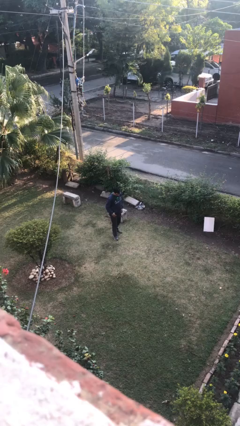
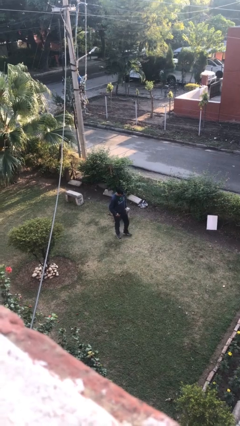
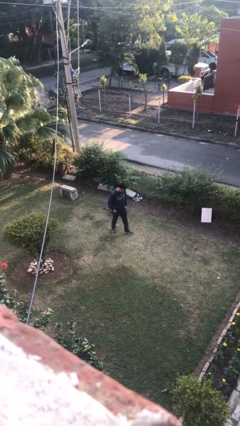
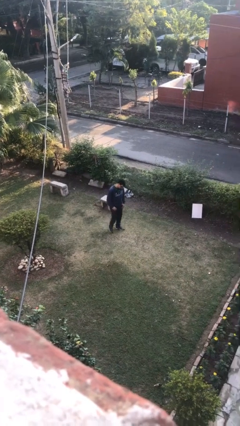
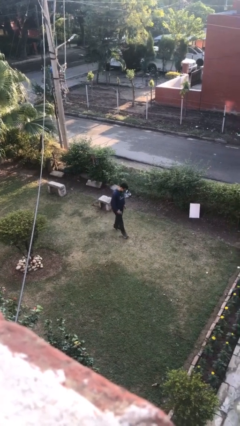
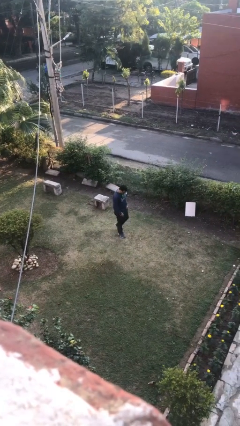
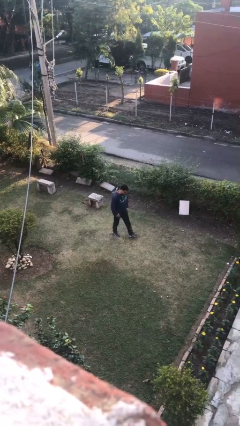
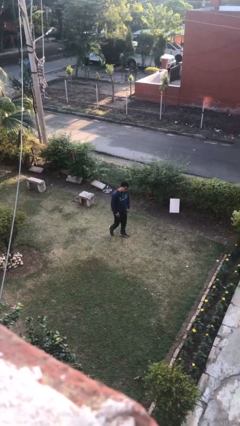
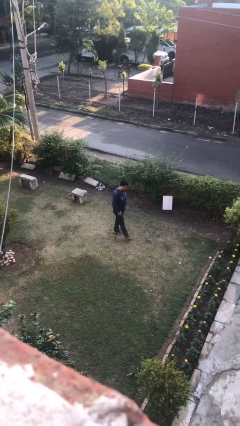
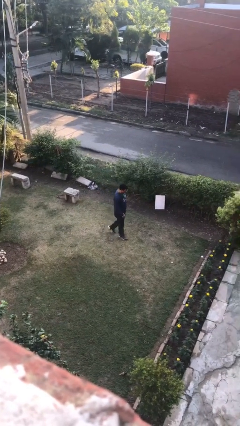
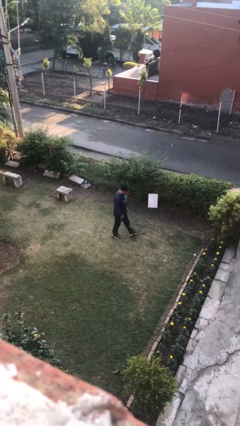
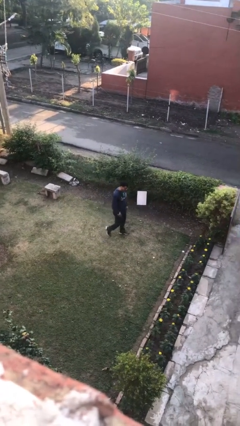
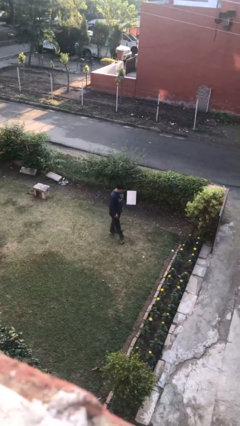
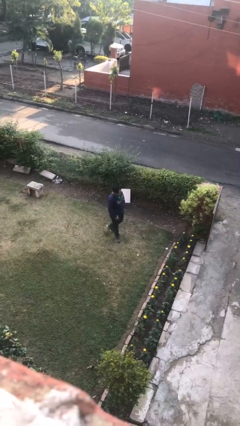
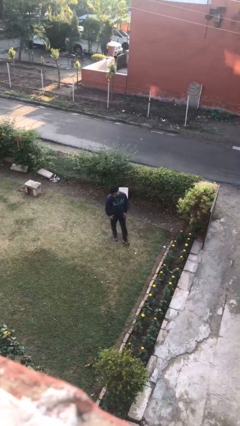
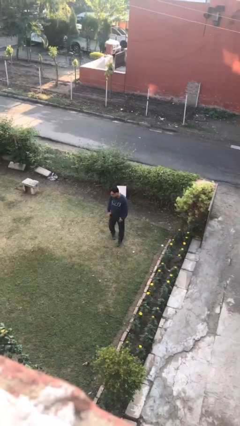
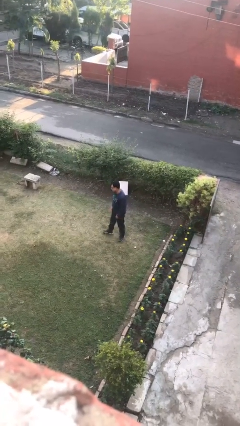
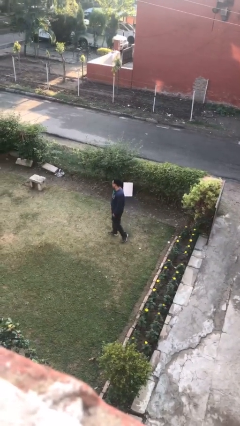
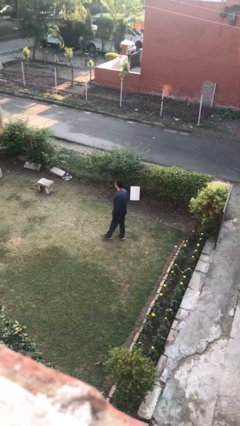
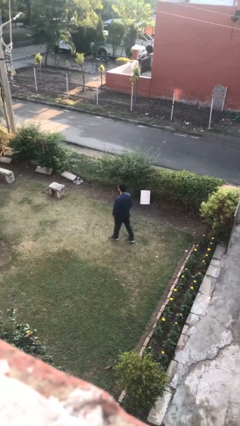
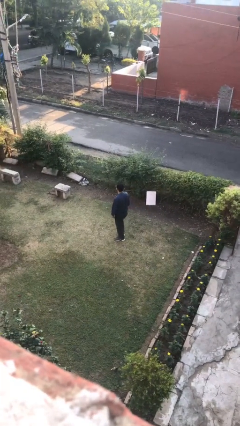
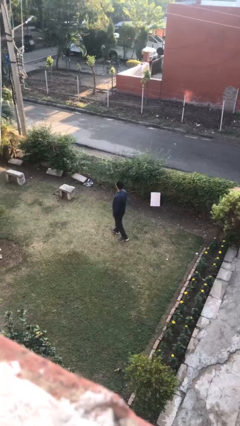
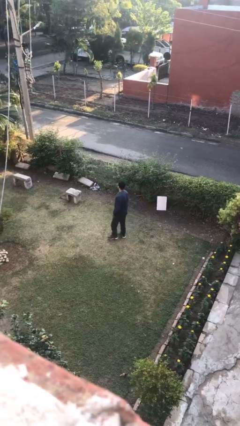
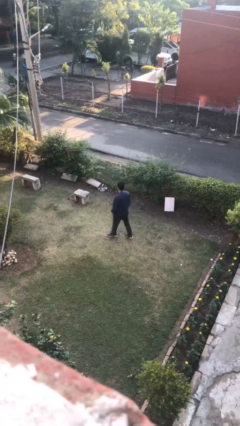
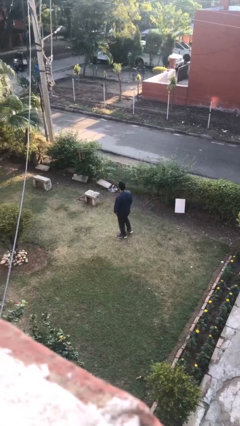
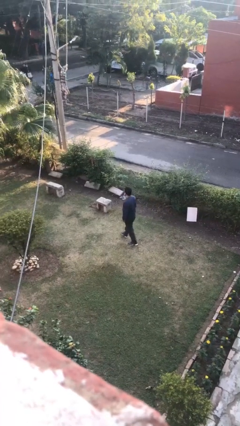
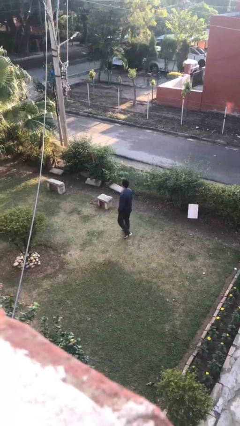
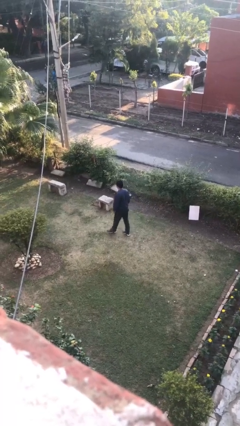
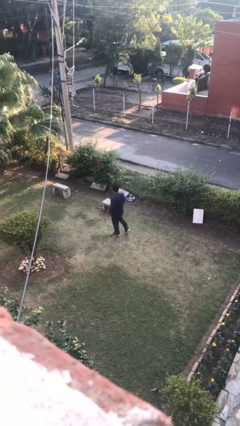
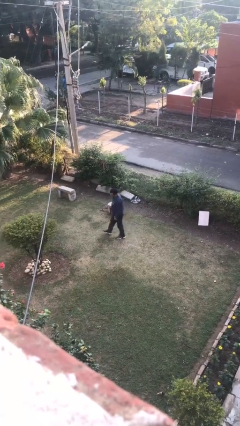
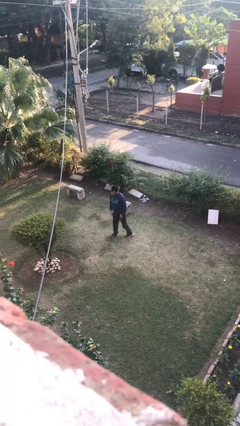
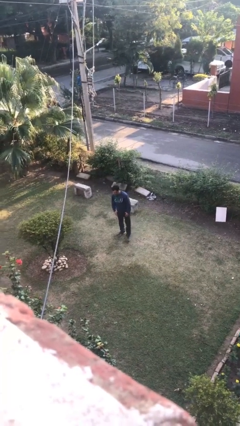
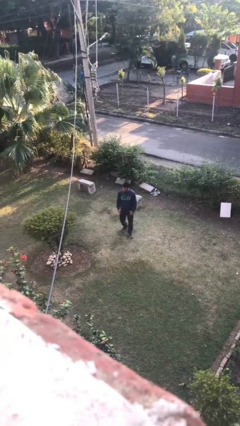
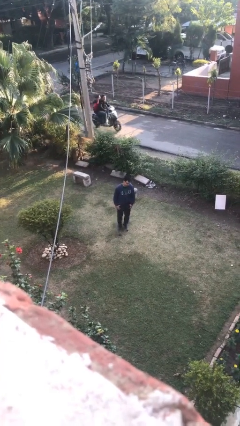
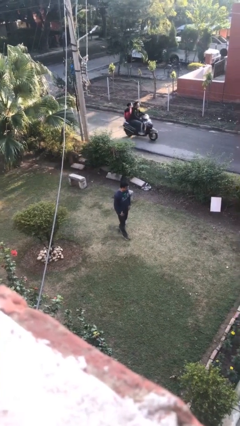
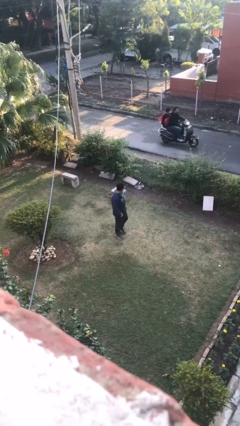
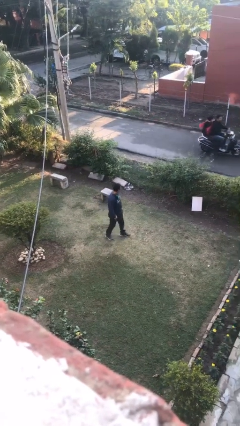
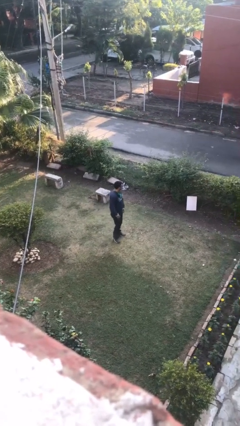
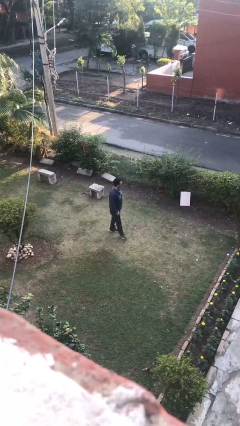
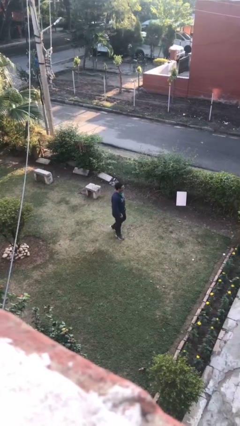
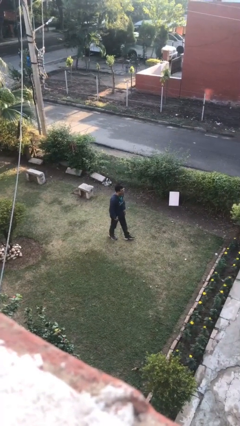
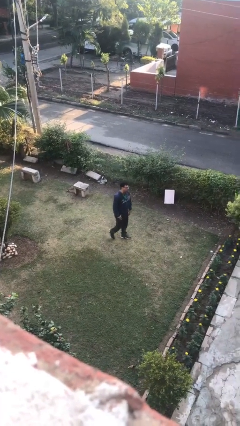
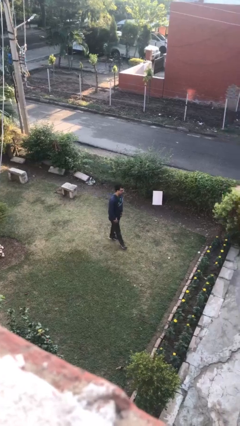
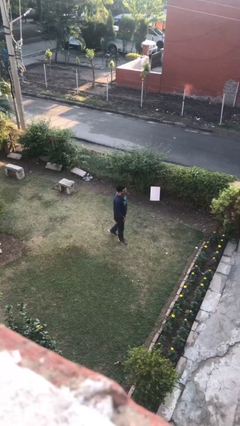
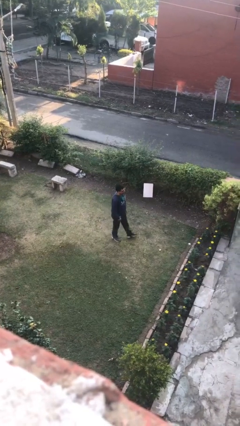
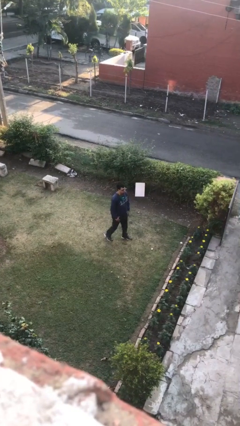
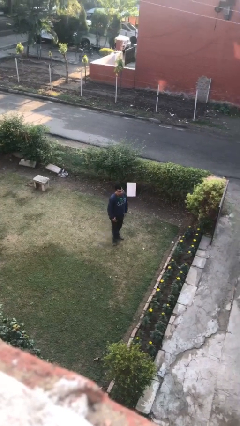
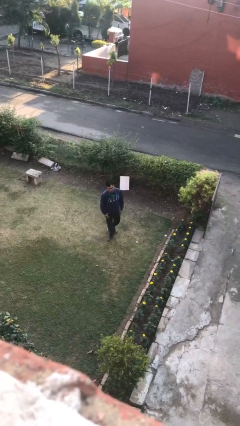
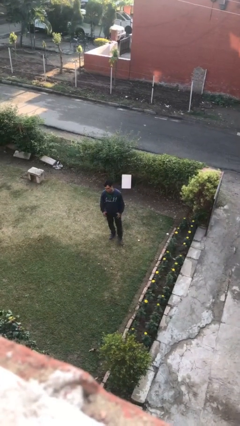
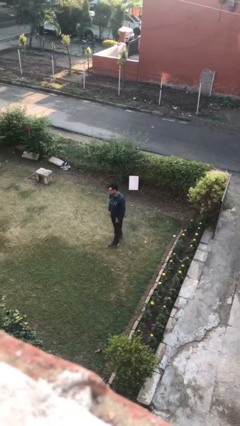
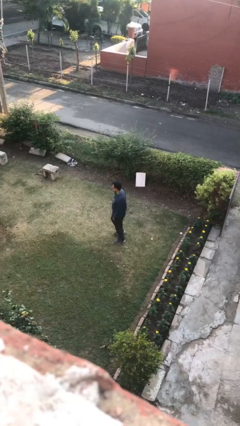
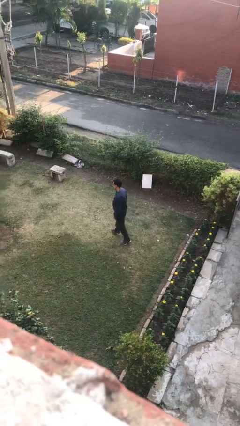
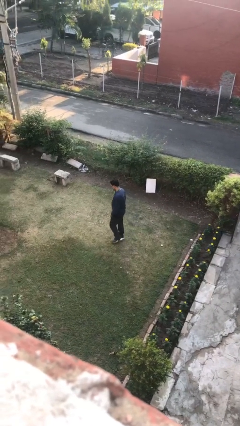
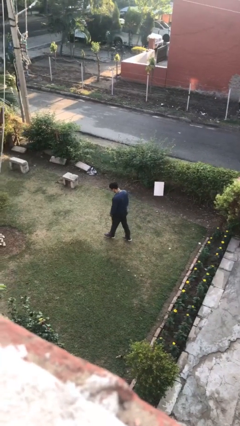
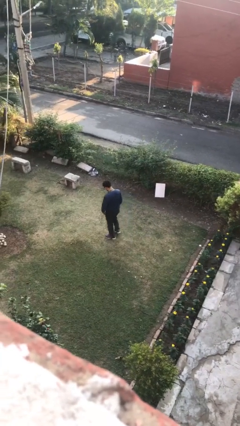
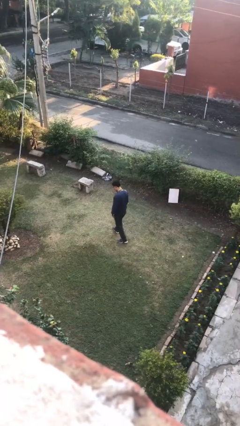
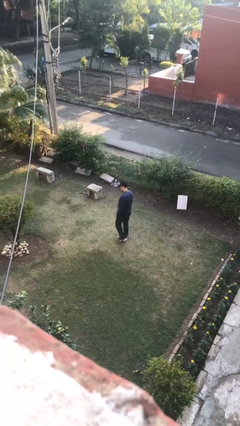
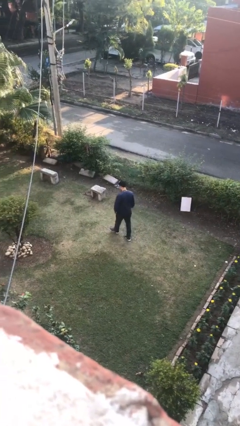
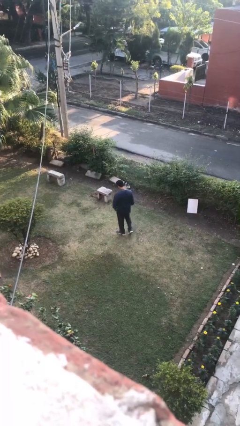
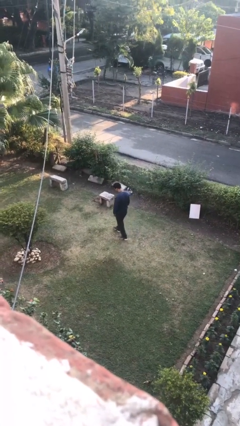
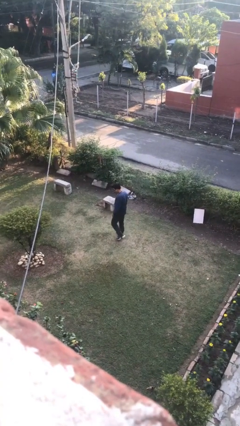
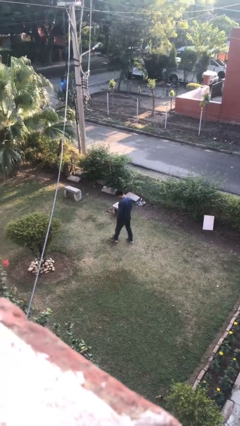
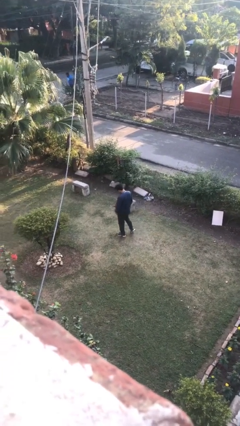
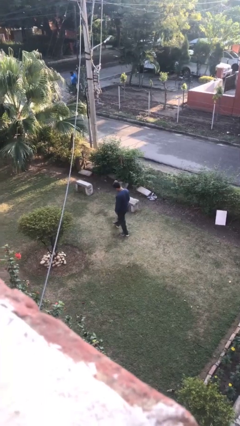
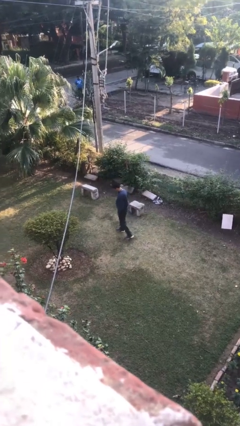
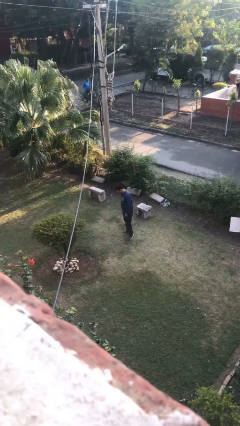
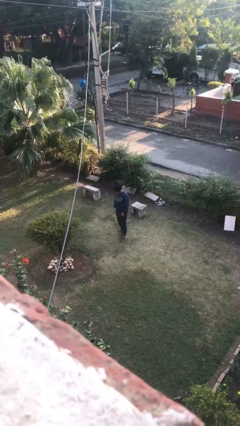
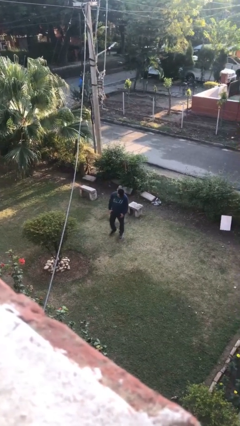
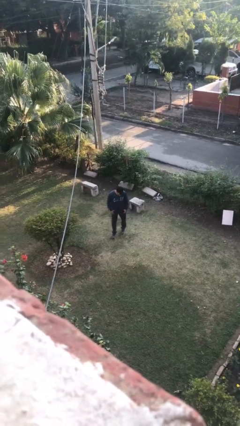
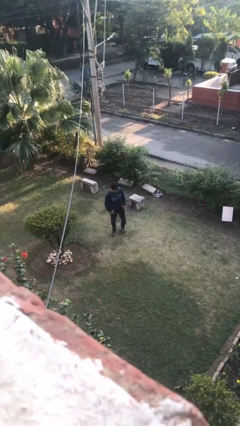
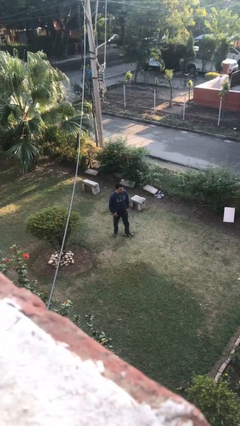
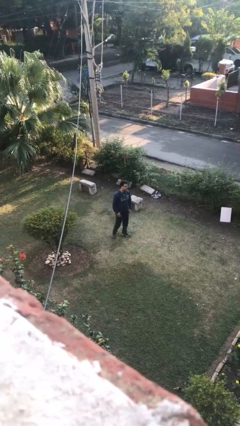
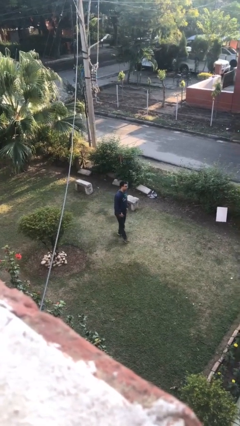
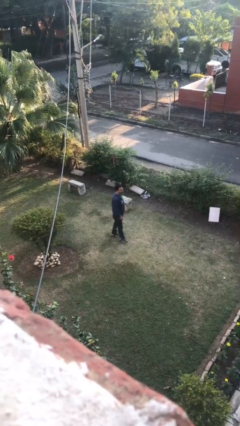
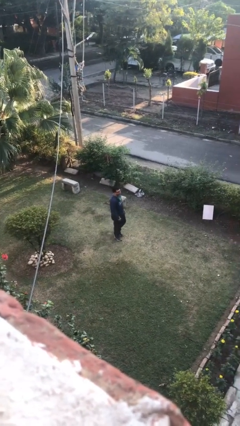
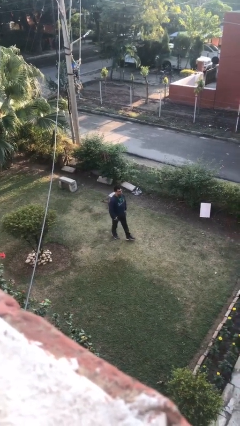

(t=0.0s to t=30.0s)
person walks

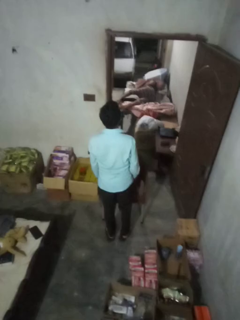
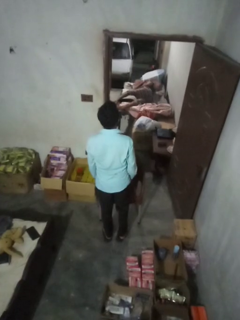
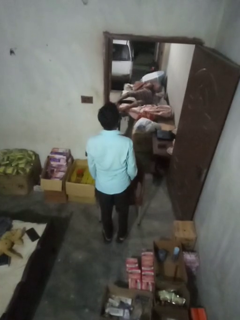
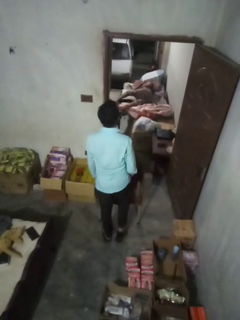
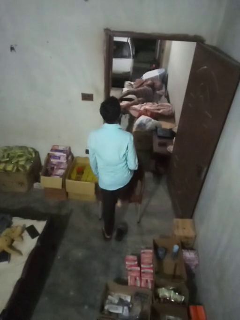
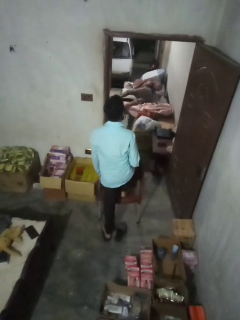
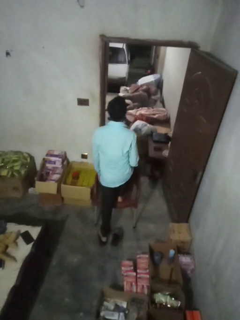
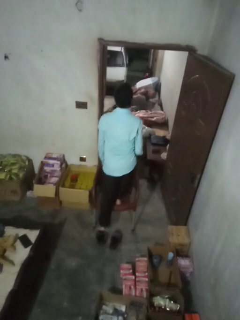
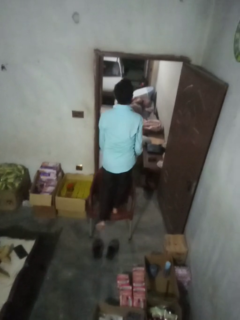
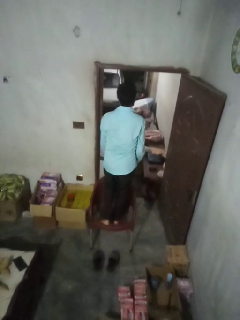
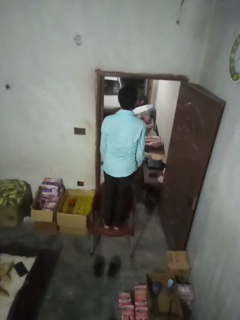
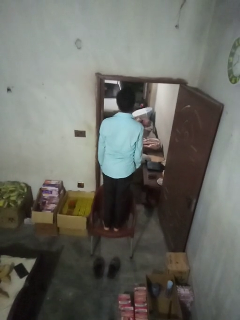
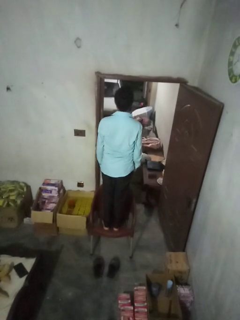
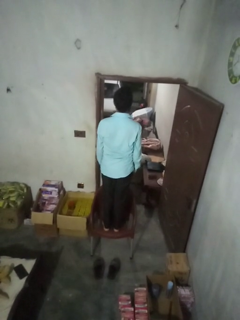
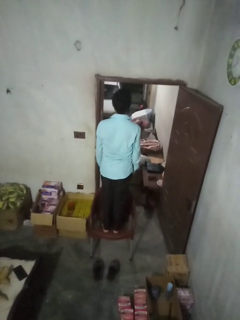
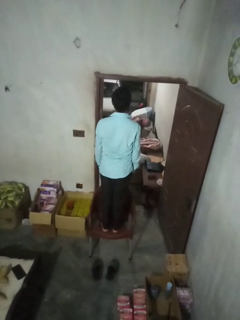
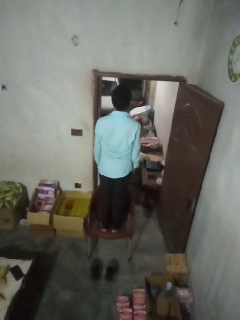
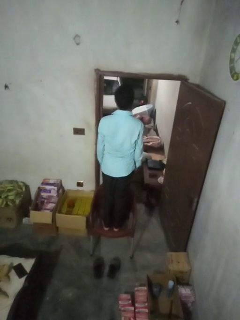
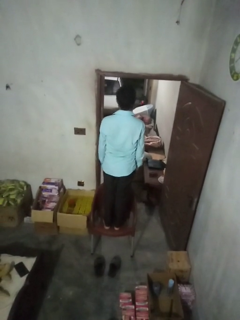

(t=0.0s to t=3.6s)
person climbs on chair

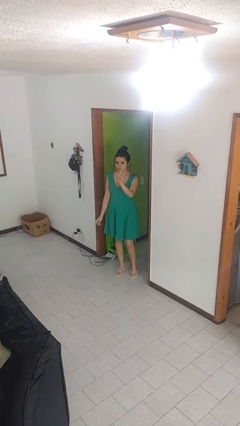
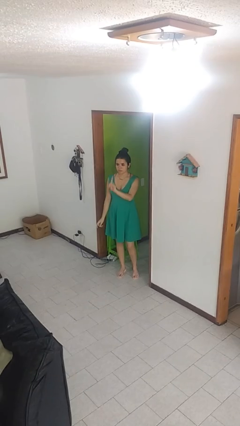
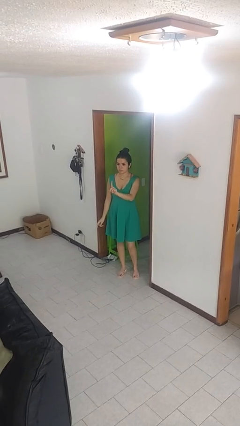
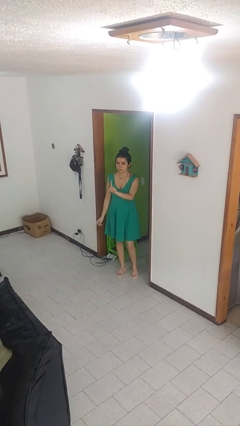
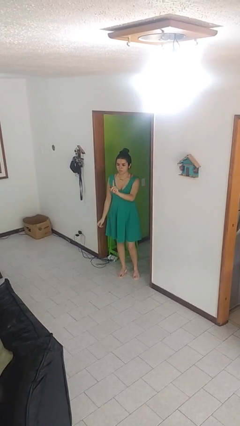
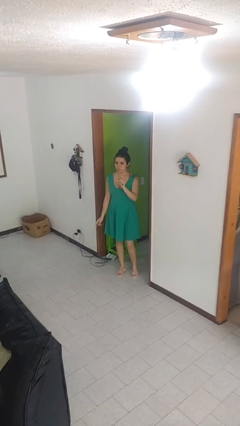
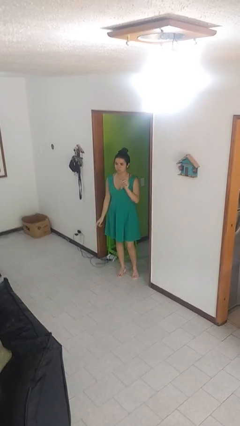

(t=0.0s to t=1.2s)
person gestures number one
